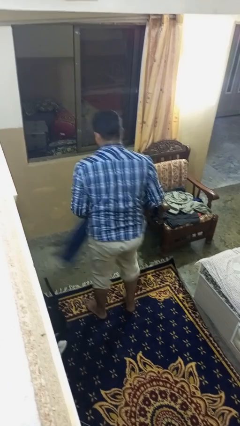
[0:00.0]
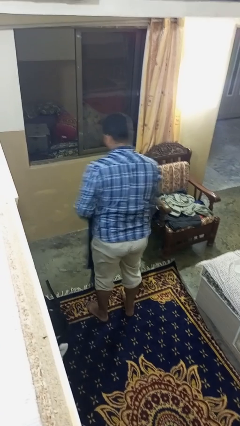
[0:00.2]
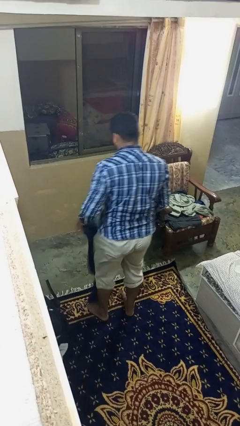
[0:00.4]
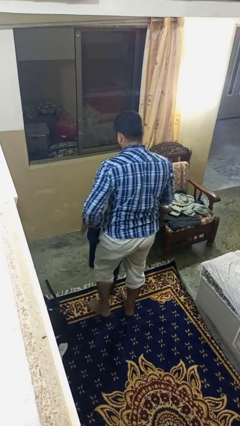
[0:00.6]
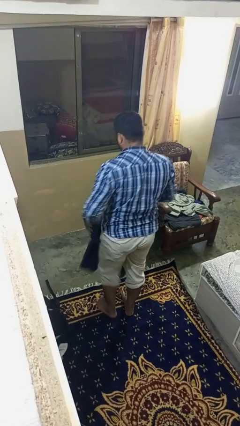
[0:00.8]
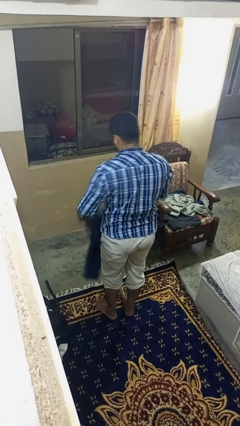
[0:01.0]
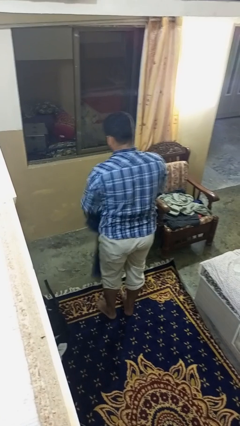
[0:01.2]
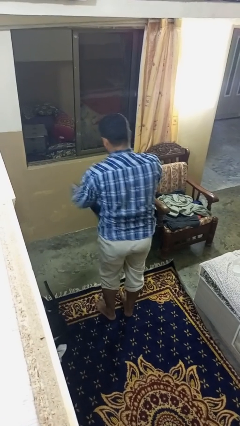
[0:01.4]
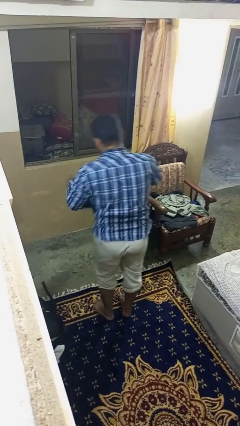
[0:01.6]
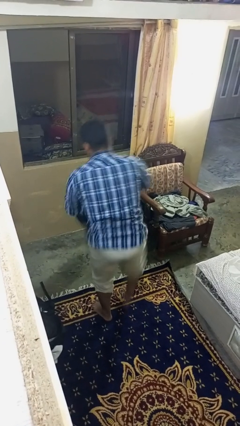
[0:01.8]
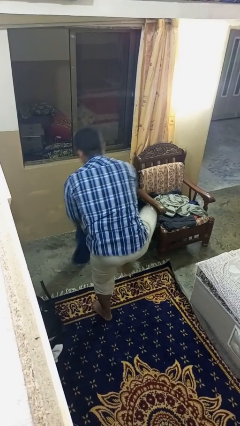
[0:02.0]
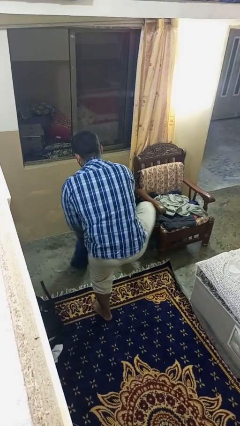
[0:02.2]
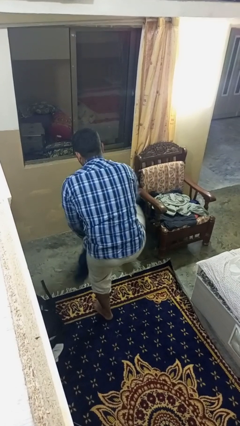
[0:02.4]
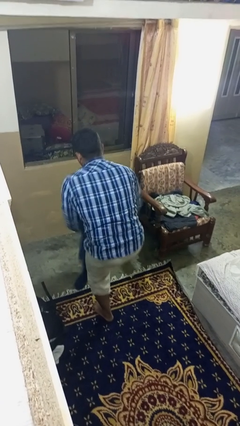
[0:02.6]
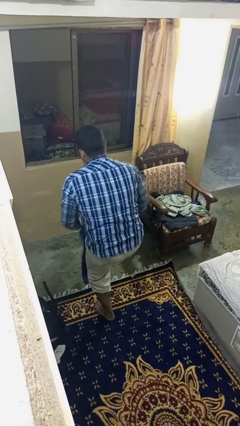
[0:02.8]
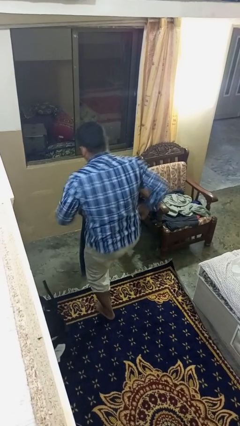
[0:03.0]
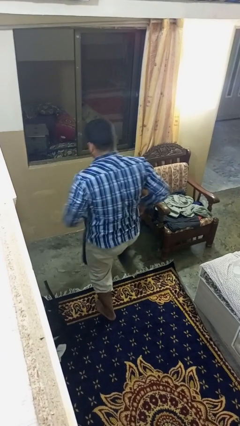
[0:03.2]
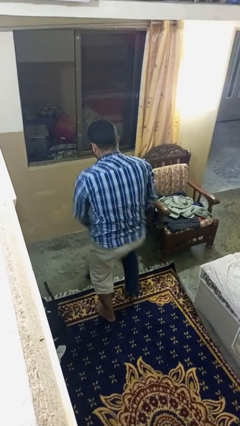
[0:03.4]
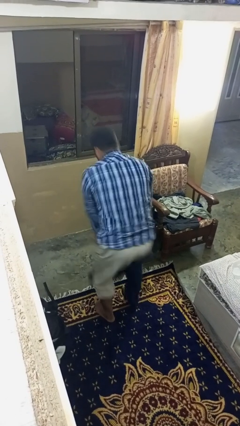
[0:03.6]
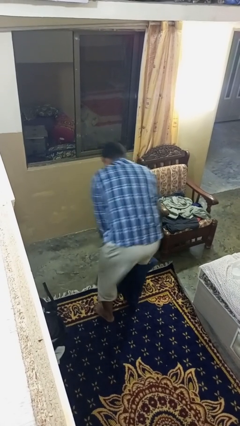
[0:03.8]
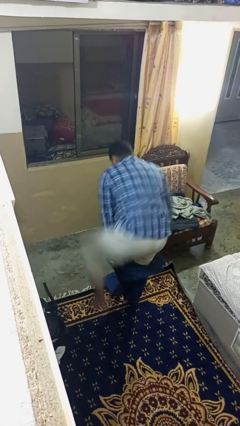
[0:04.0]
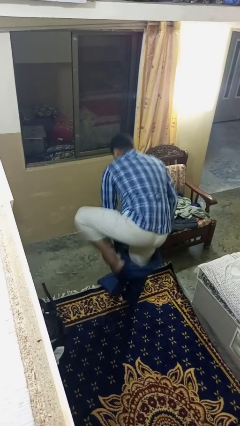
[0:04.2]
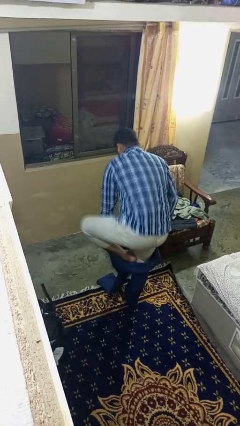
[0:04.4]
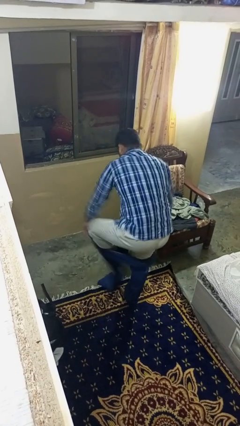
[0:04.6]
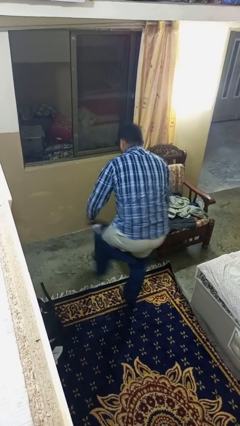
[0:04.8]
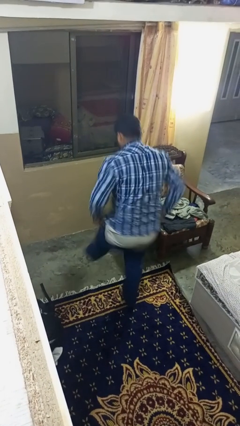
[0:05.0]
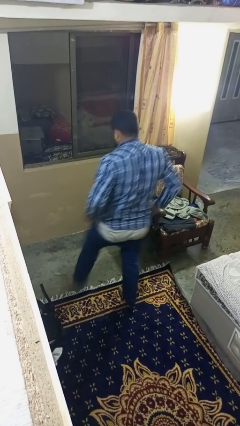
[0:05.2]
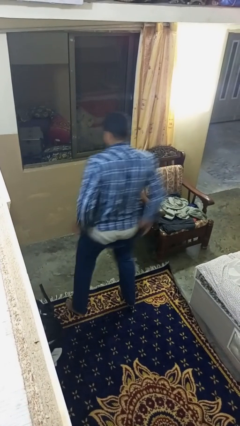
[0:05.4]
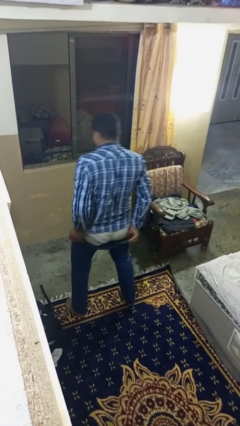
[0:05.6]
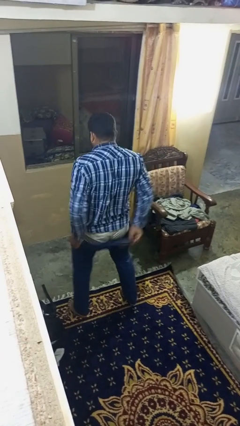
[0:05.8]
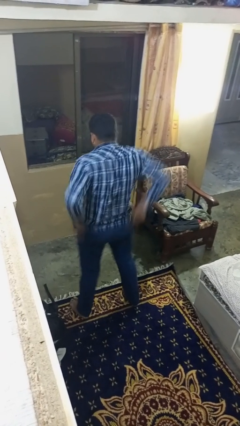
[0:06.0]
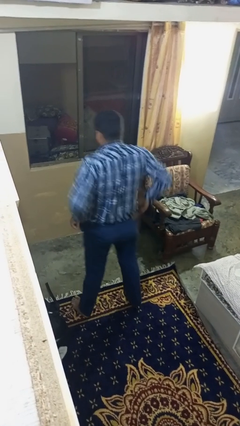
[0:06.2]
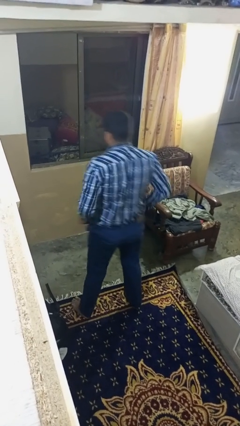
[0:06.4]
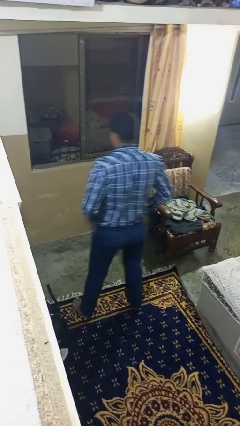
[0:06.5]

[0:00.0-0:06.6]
person puts on pants

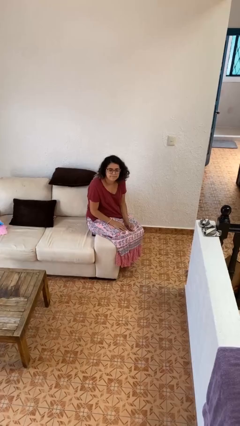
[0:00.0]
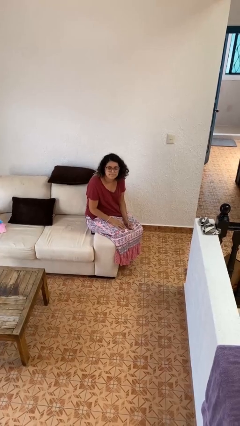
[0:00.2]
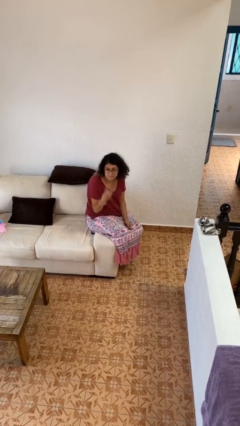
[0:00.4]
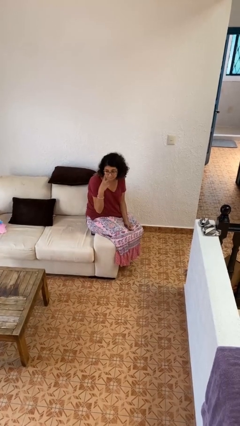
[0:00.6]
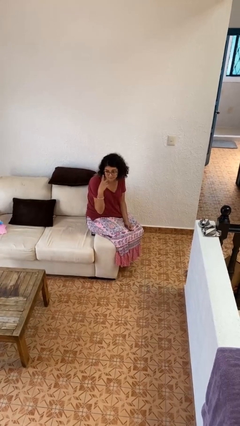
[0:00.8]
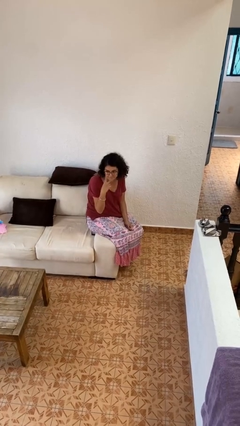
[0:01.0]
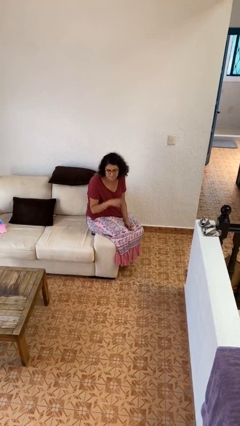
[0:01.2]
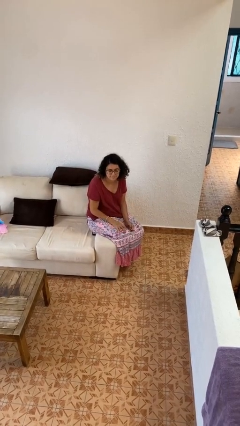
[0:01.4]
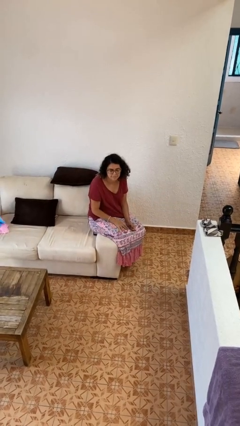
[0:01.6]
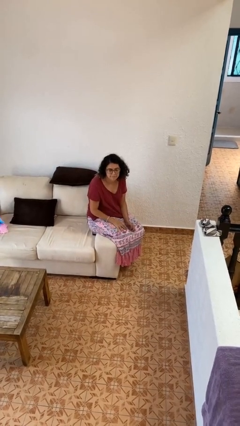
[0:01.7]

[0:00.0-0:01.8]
person gestures watch closely

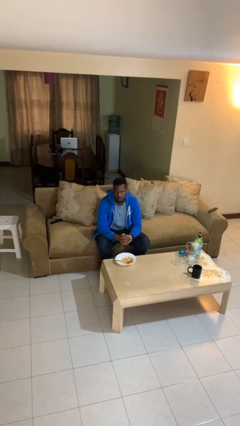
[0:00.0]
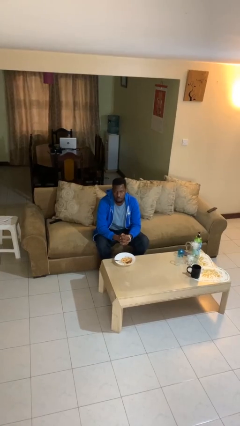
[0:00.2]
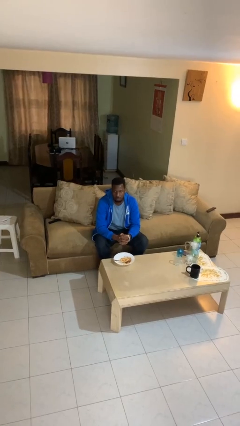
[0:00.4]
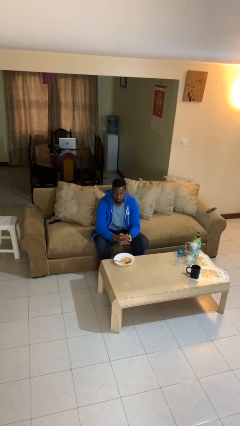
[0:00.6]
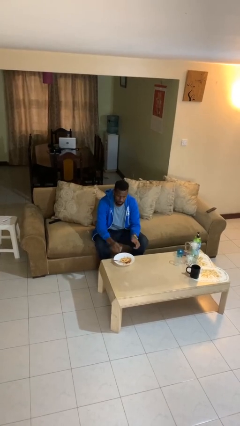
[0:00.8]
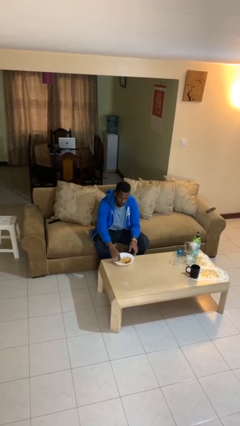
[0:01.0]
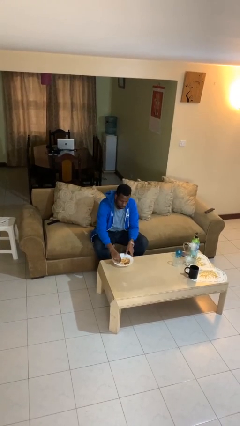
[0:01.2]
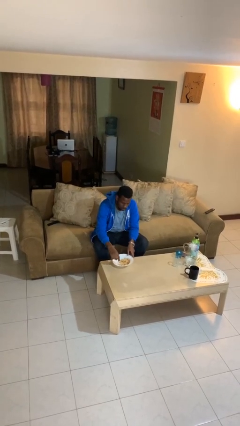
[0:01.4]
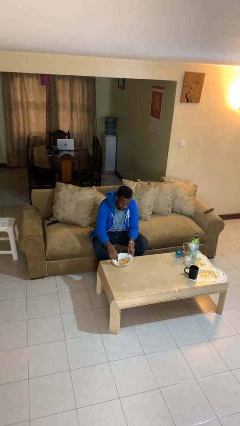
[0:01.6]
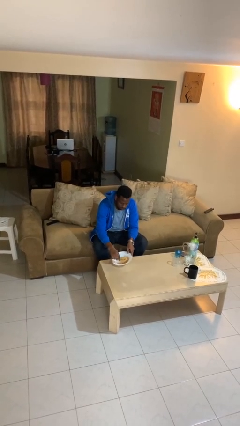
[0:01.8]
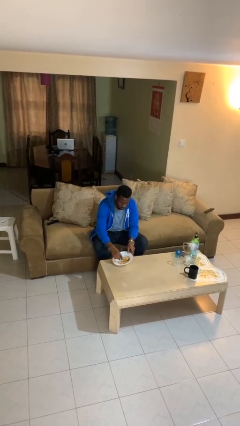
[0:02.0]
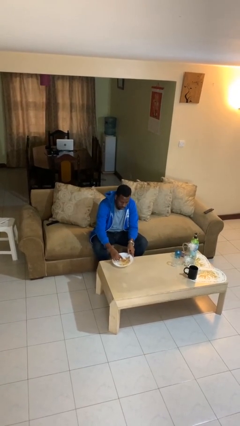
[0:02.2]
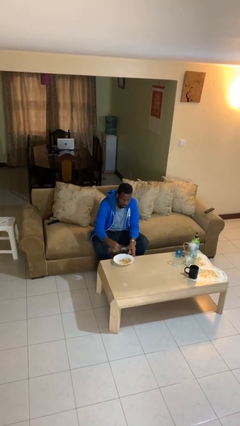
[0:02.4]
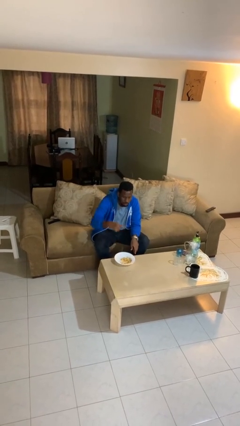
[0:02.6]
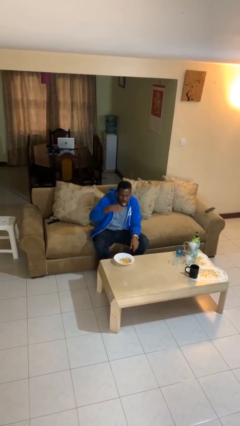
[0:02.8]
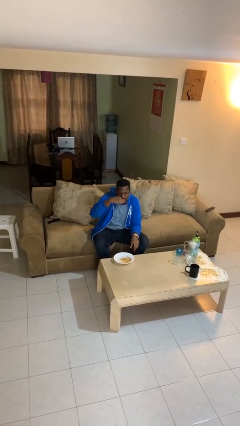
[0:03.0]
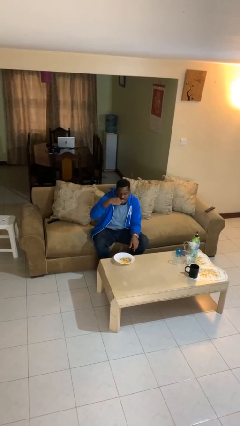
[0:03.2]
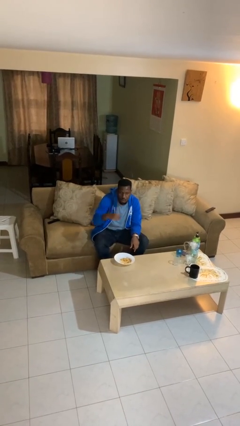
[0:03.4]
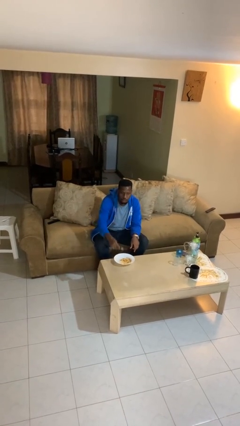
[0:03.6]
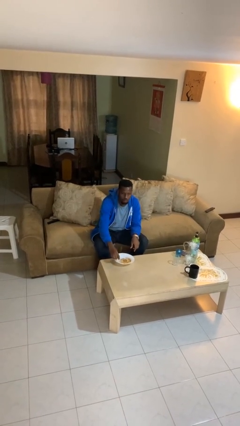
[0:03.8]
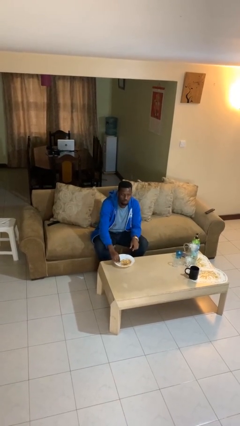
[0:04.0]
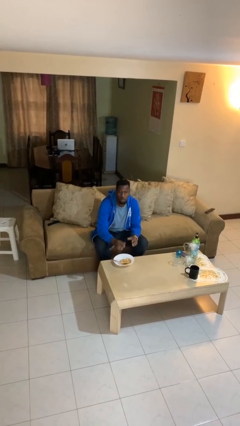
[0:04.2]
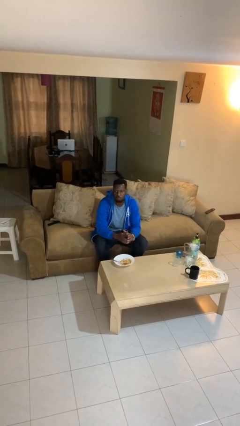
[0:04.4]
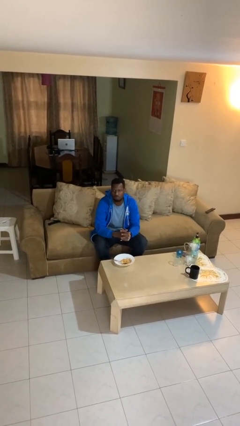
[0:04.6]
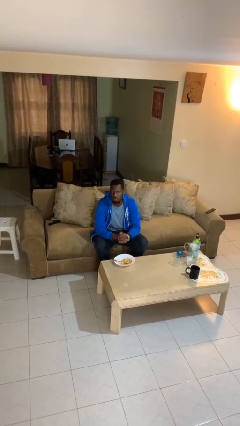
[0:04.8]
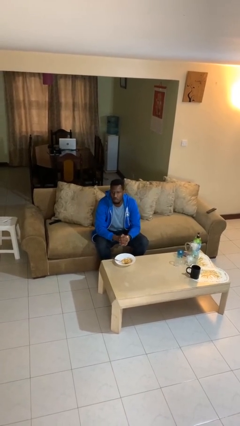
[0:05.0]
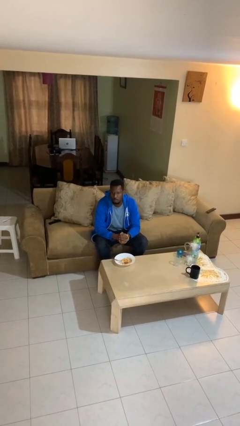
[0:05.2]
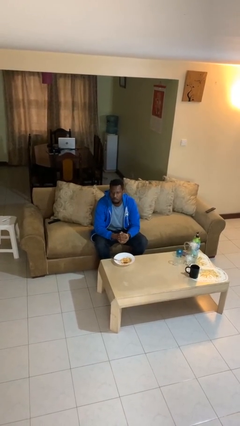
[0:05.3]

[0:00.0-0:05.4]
person eats with utensil

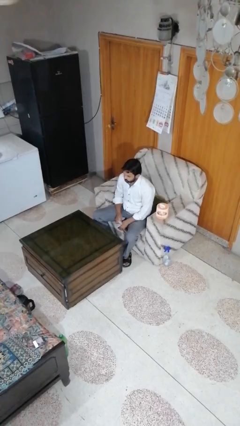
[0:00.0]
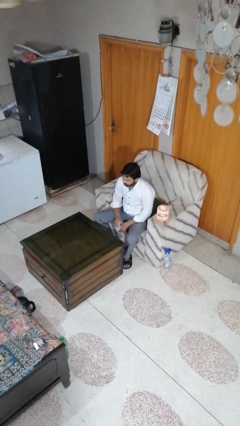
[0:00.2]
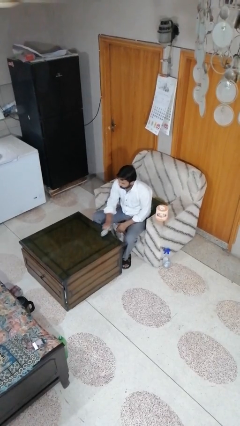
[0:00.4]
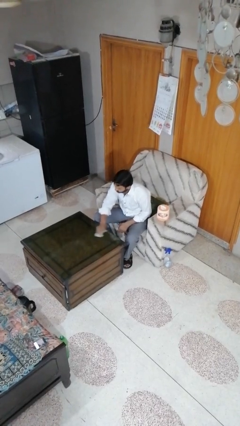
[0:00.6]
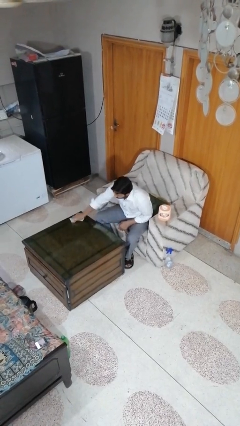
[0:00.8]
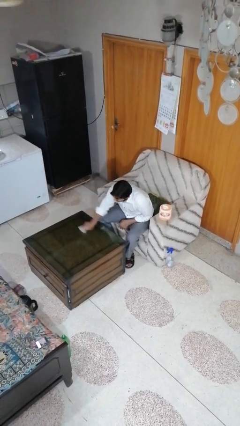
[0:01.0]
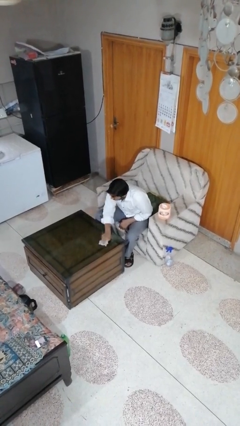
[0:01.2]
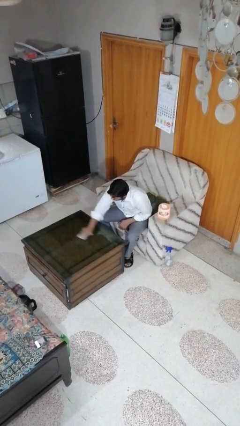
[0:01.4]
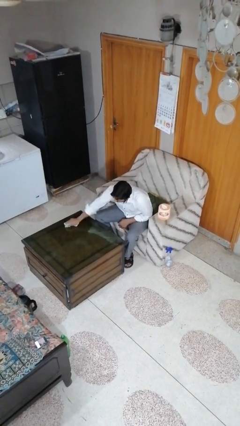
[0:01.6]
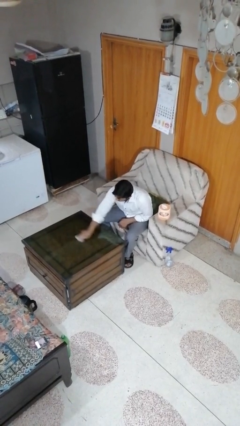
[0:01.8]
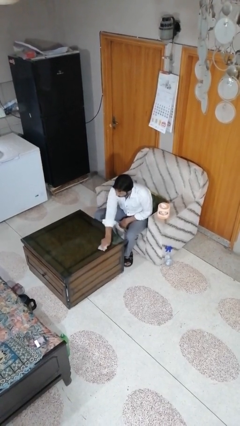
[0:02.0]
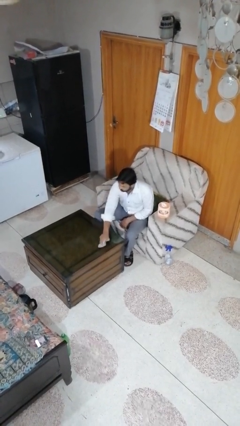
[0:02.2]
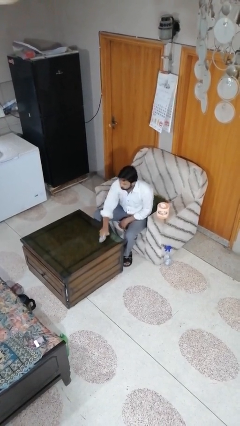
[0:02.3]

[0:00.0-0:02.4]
person cleans table with rag

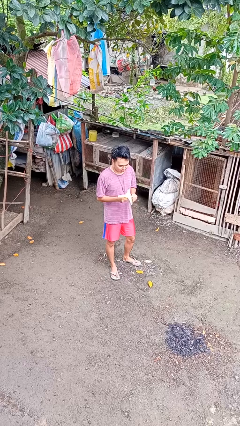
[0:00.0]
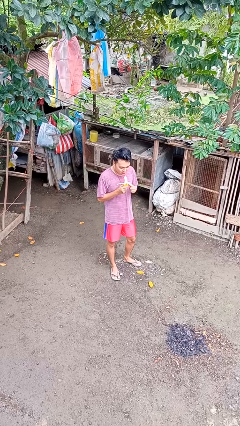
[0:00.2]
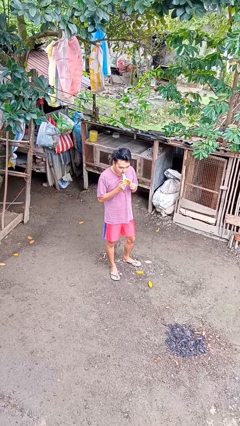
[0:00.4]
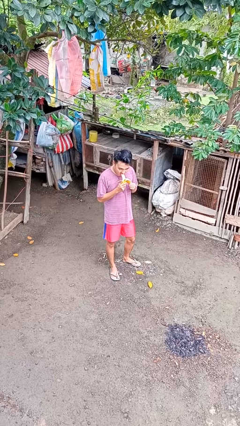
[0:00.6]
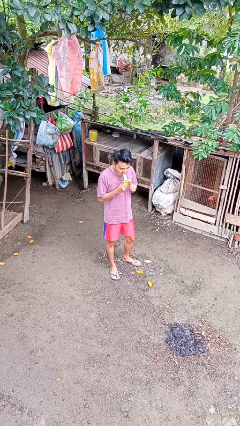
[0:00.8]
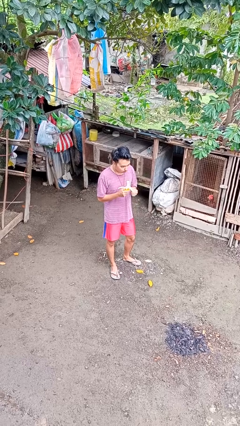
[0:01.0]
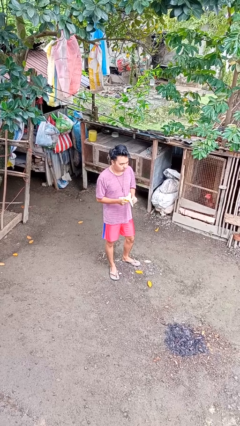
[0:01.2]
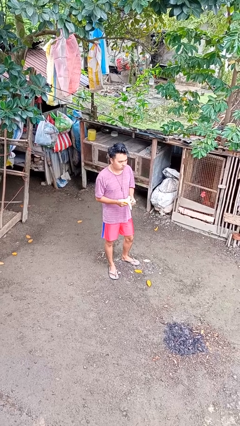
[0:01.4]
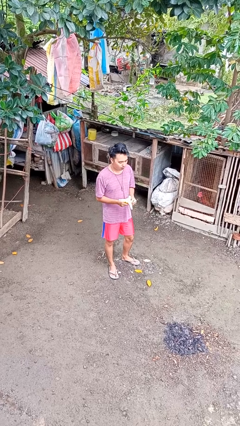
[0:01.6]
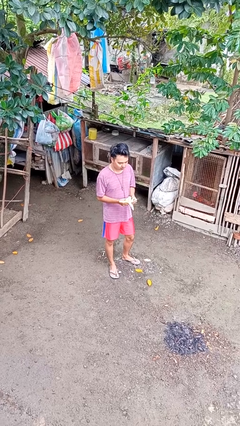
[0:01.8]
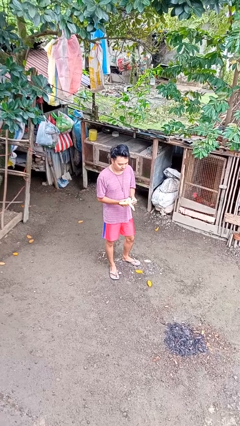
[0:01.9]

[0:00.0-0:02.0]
person eats banana
